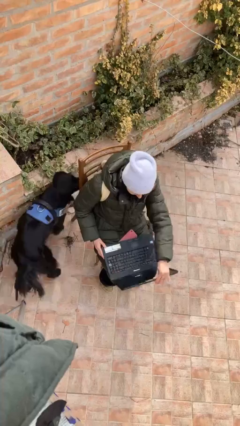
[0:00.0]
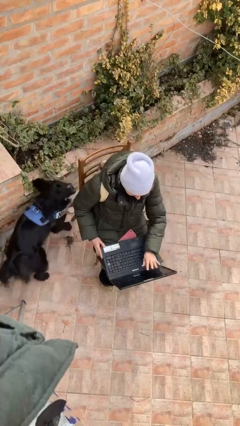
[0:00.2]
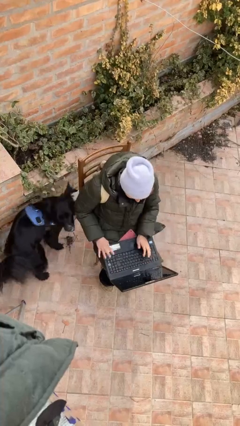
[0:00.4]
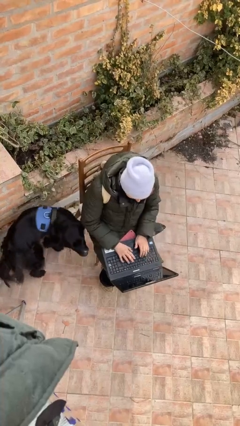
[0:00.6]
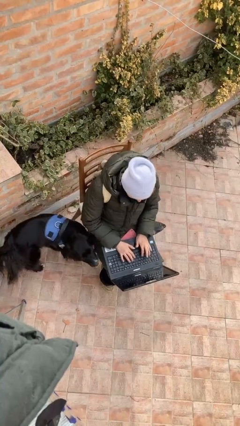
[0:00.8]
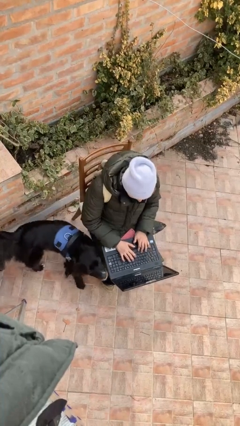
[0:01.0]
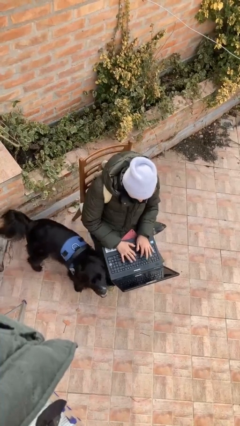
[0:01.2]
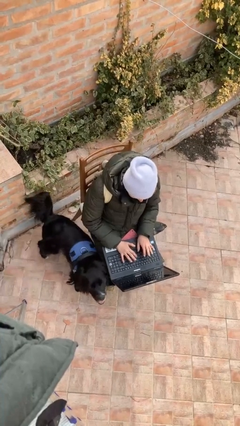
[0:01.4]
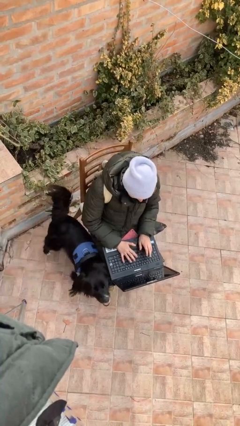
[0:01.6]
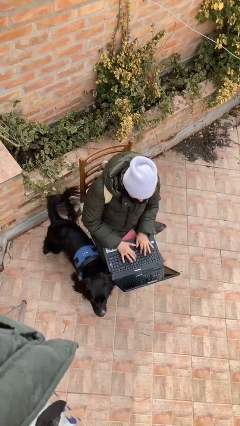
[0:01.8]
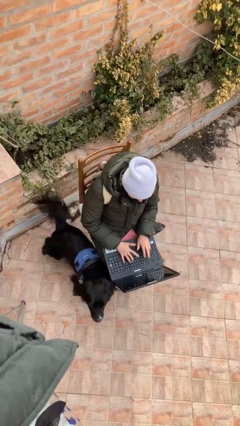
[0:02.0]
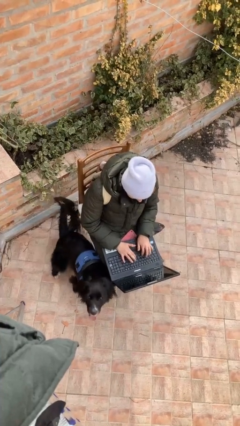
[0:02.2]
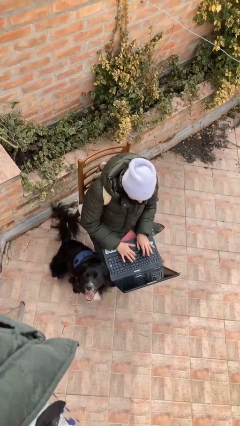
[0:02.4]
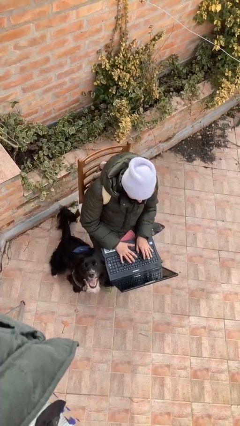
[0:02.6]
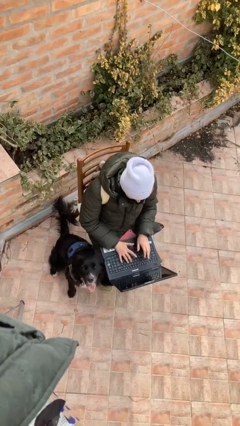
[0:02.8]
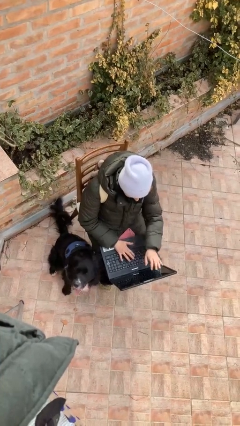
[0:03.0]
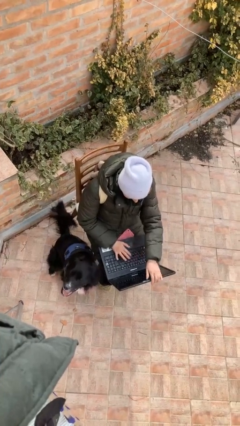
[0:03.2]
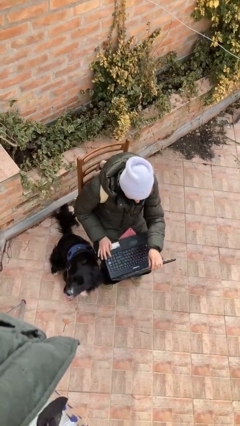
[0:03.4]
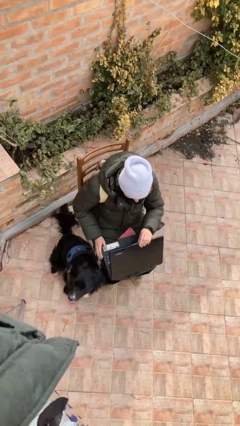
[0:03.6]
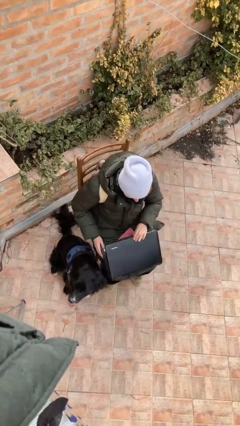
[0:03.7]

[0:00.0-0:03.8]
person interacts with laptop

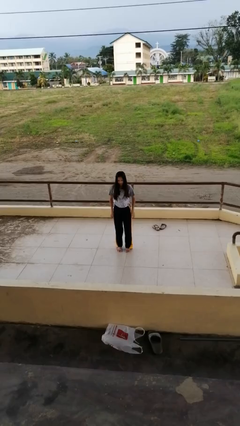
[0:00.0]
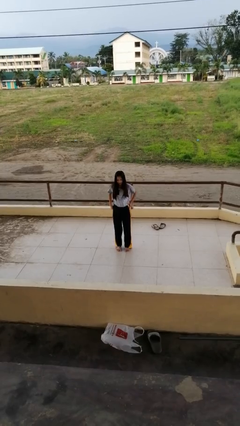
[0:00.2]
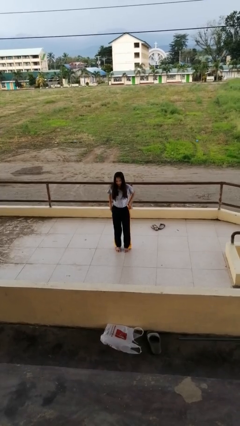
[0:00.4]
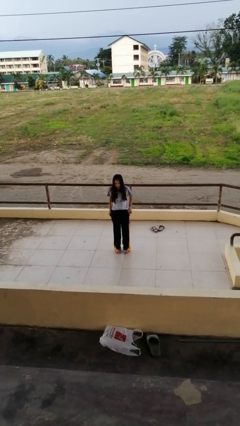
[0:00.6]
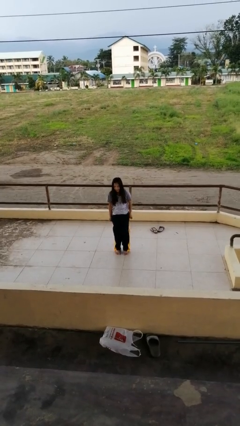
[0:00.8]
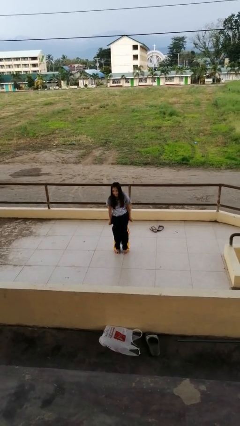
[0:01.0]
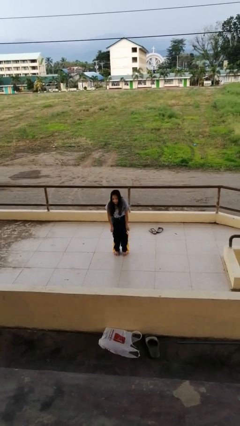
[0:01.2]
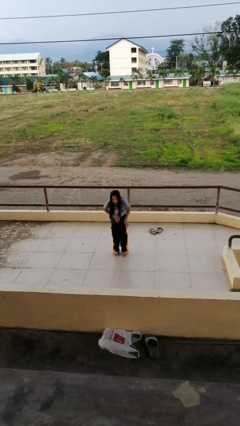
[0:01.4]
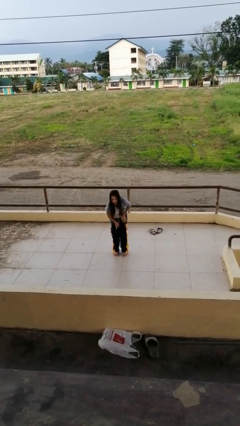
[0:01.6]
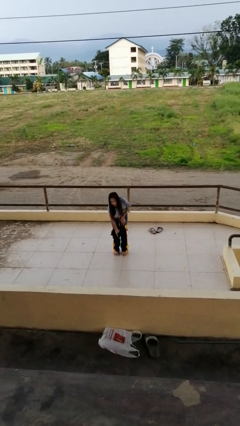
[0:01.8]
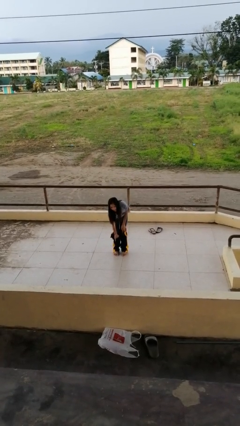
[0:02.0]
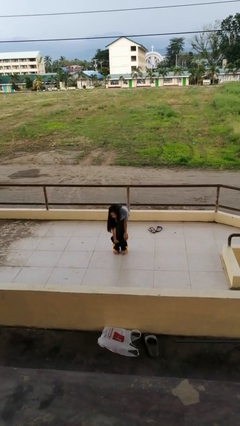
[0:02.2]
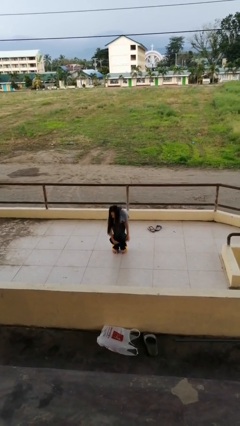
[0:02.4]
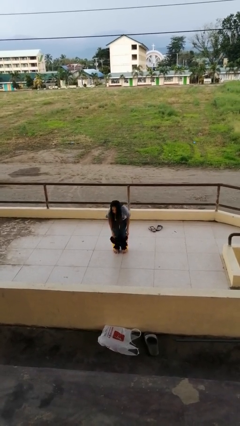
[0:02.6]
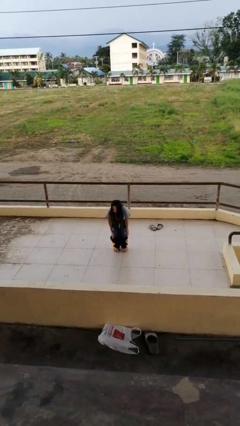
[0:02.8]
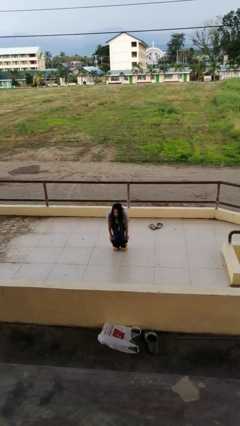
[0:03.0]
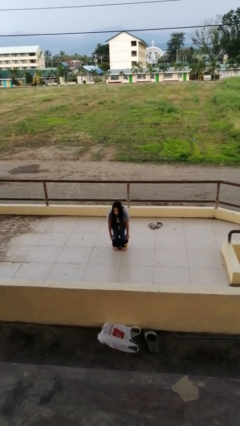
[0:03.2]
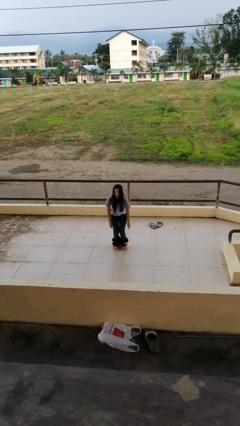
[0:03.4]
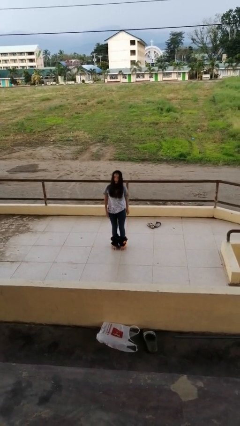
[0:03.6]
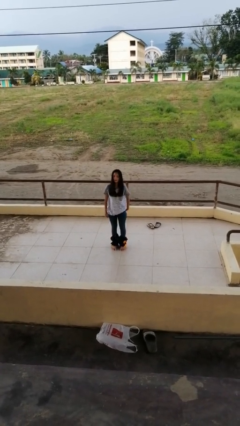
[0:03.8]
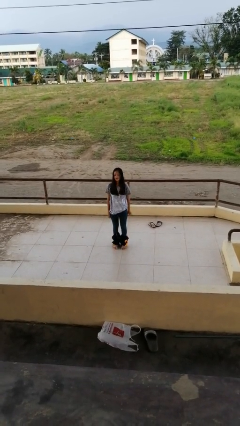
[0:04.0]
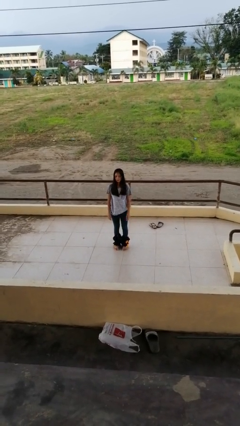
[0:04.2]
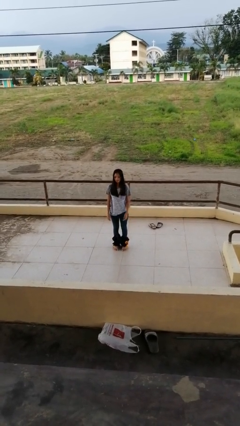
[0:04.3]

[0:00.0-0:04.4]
person takes off pants

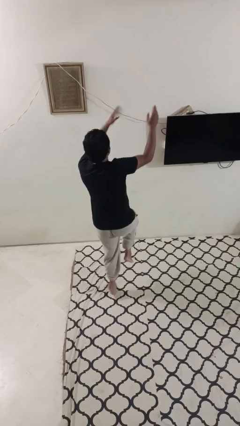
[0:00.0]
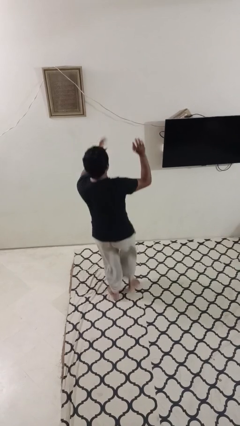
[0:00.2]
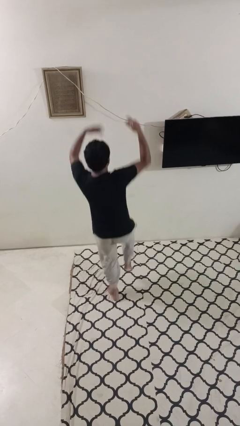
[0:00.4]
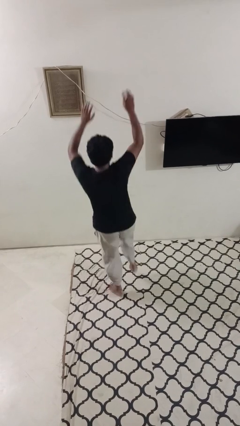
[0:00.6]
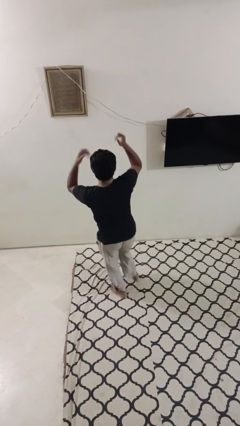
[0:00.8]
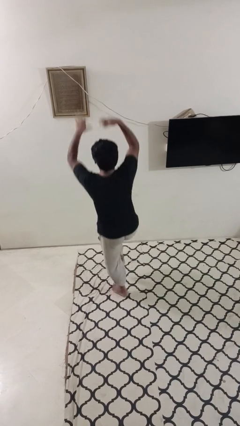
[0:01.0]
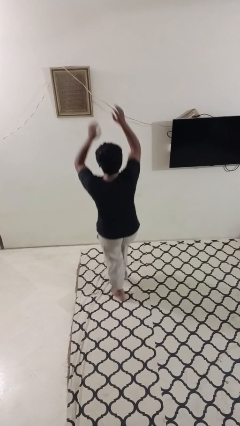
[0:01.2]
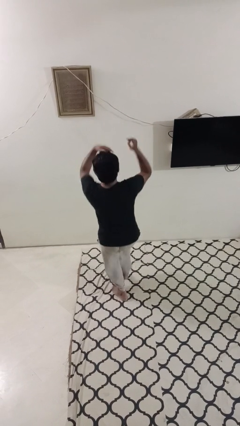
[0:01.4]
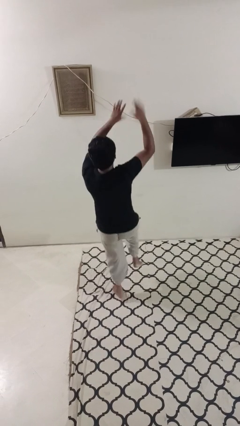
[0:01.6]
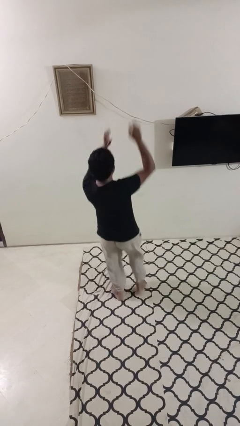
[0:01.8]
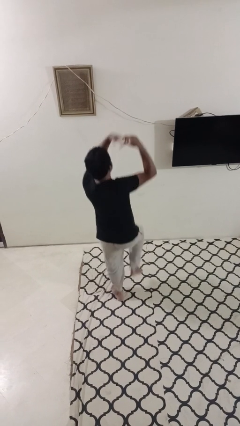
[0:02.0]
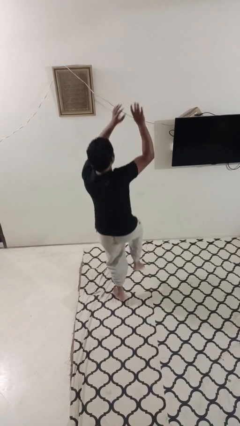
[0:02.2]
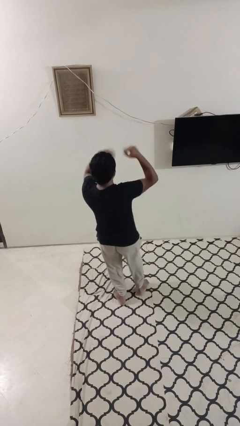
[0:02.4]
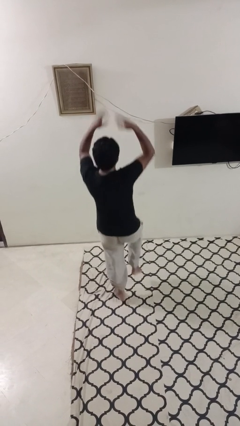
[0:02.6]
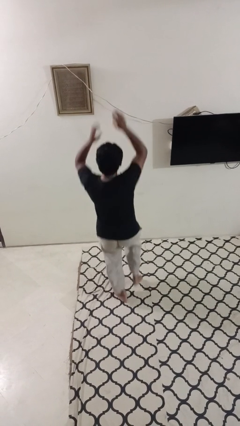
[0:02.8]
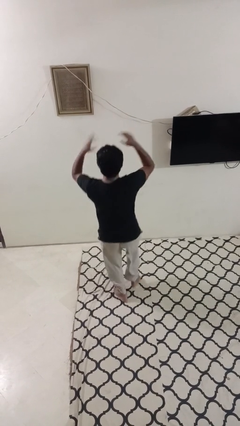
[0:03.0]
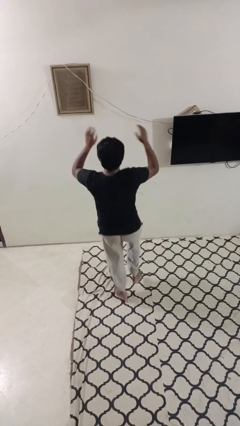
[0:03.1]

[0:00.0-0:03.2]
person dances in place

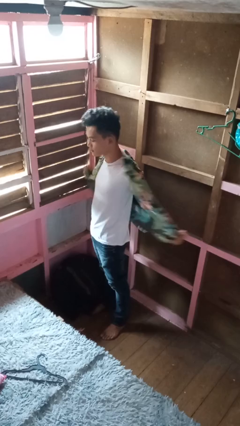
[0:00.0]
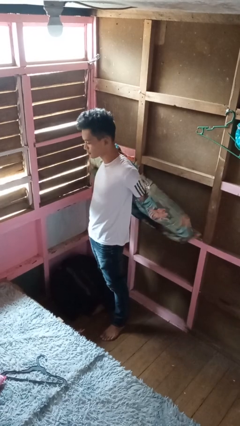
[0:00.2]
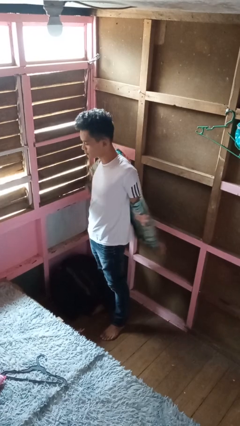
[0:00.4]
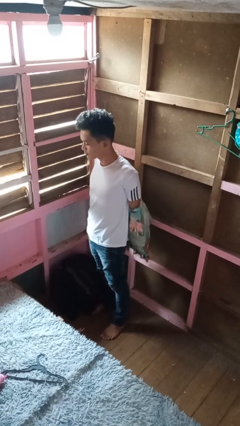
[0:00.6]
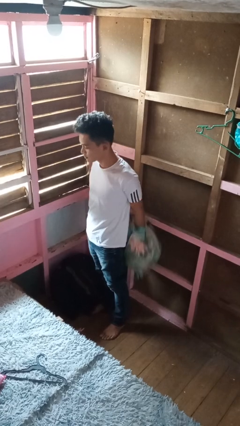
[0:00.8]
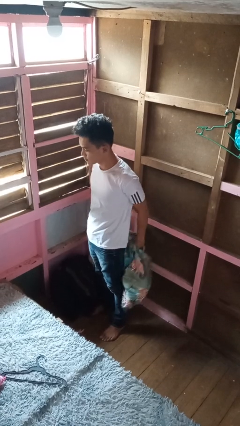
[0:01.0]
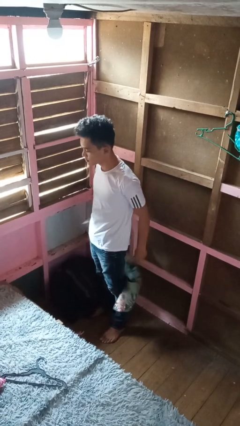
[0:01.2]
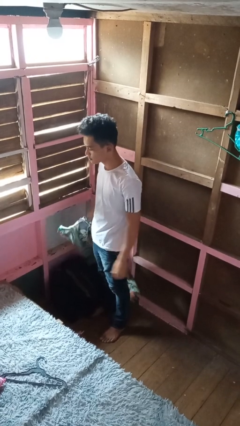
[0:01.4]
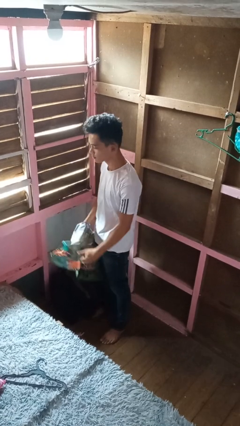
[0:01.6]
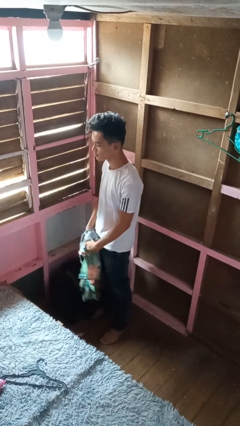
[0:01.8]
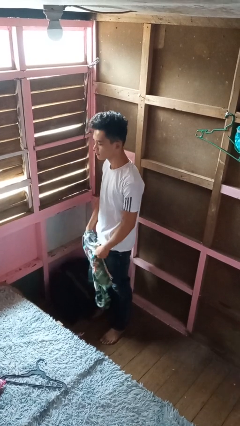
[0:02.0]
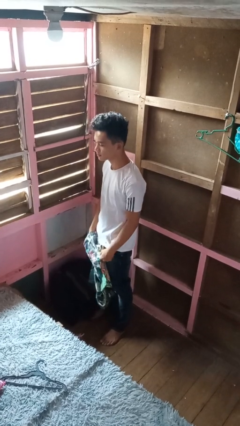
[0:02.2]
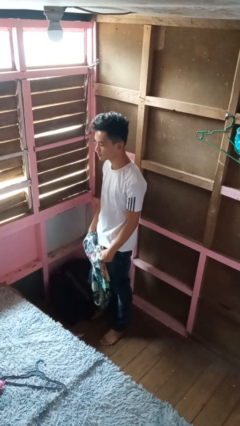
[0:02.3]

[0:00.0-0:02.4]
person takes off shirt

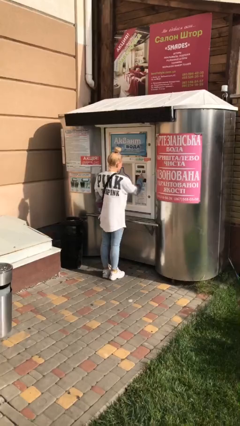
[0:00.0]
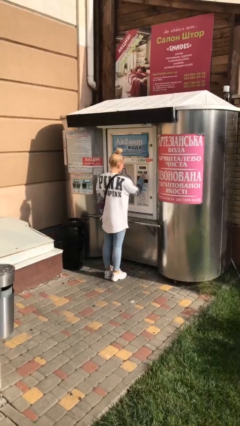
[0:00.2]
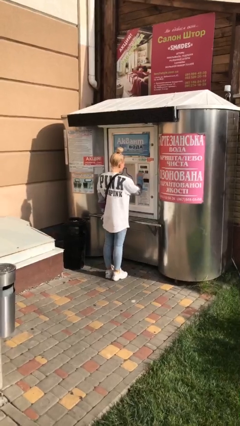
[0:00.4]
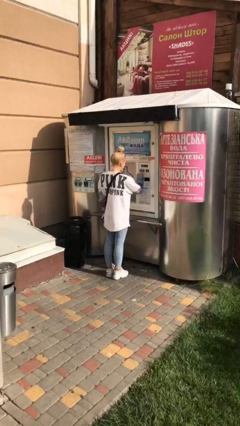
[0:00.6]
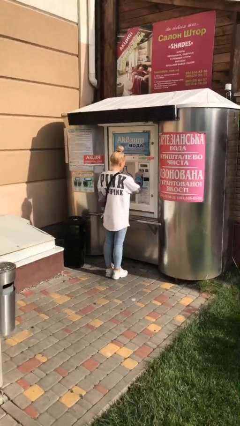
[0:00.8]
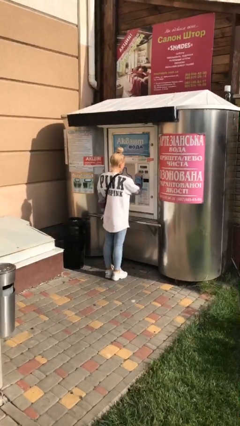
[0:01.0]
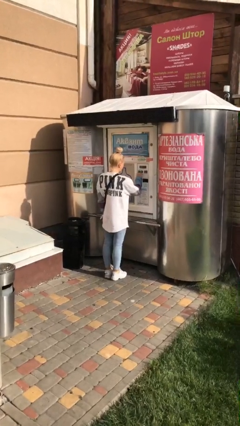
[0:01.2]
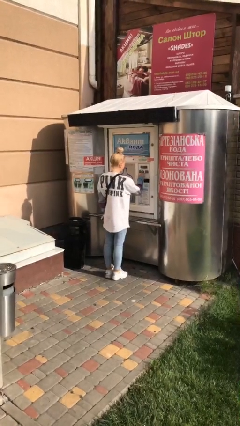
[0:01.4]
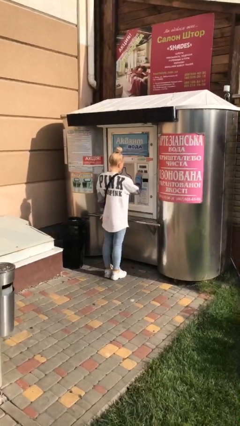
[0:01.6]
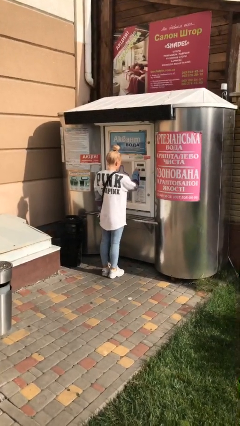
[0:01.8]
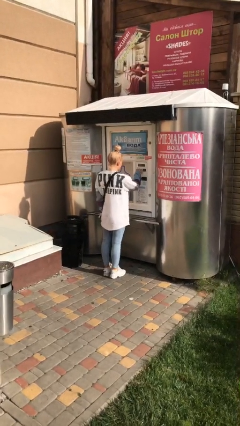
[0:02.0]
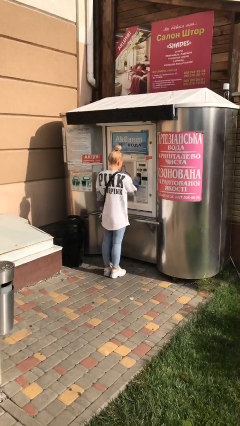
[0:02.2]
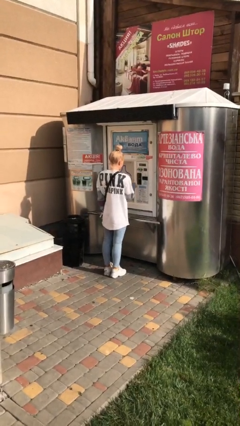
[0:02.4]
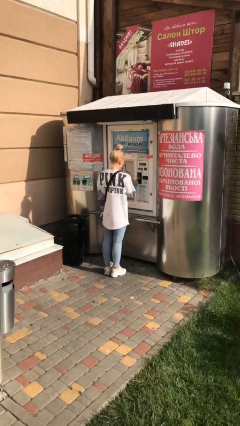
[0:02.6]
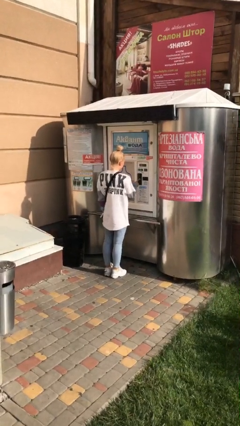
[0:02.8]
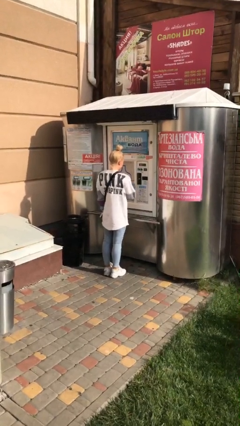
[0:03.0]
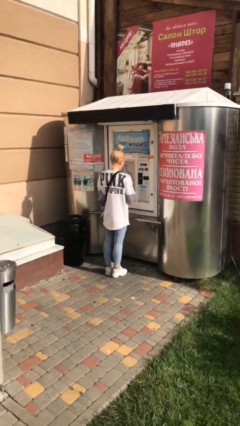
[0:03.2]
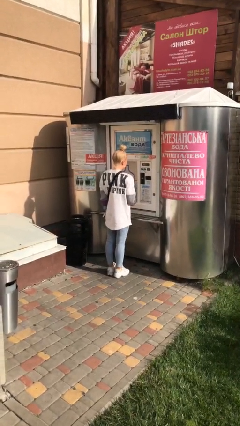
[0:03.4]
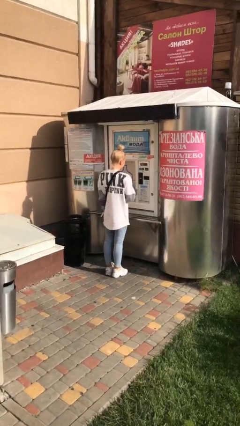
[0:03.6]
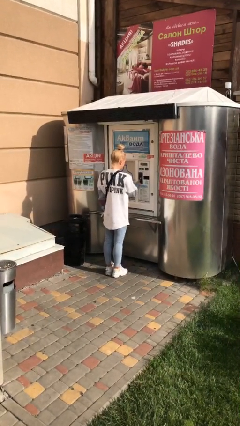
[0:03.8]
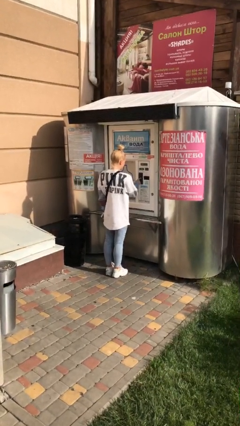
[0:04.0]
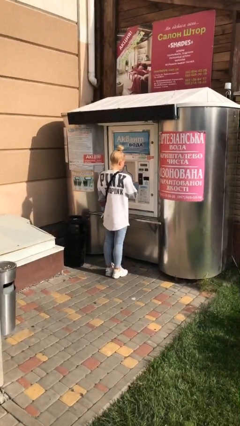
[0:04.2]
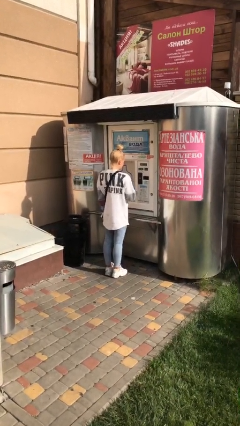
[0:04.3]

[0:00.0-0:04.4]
person purchases from machine
